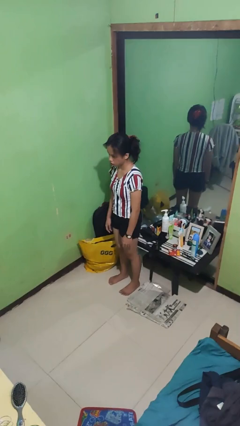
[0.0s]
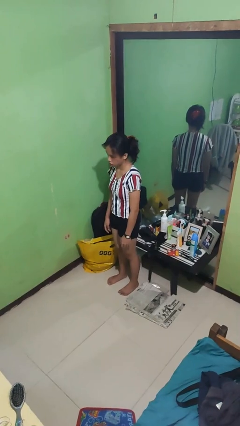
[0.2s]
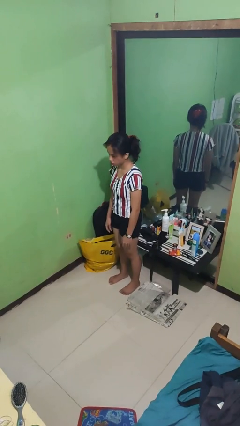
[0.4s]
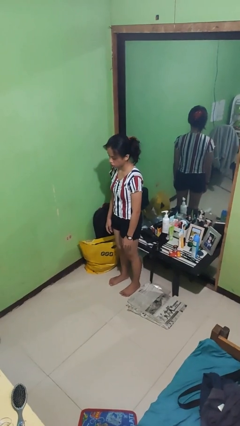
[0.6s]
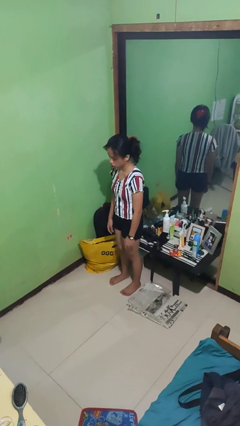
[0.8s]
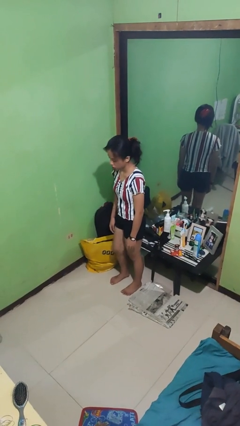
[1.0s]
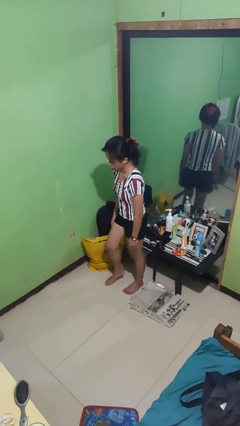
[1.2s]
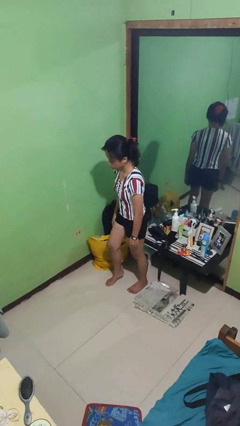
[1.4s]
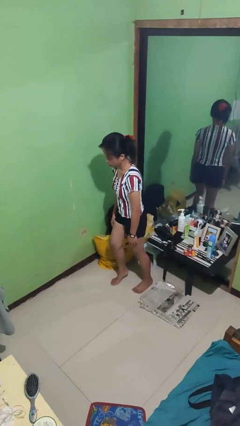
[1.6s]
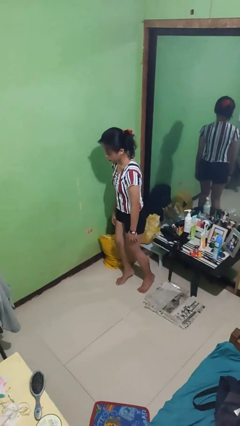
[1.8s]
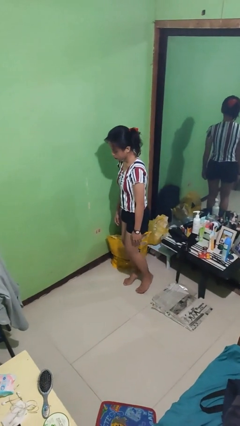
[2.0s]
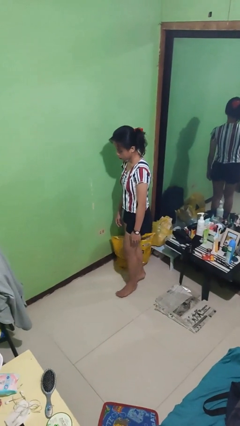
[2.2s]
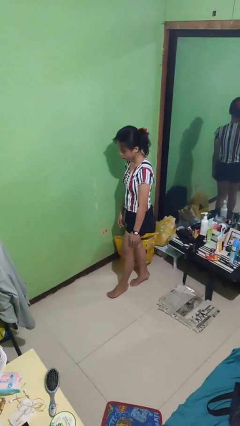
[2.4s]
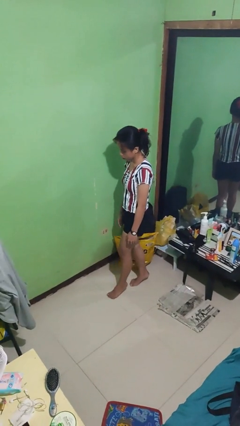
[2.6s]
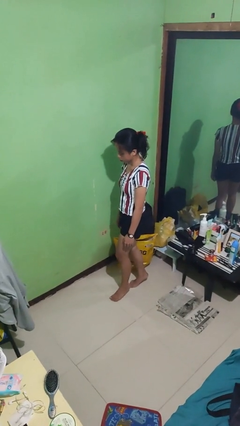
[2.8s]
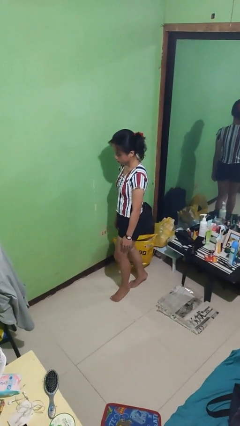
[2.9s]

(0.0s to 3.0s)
person walks tiptoe

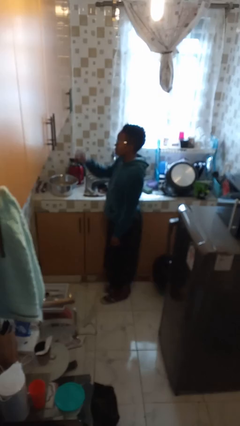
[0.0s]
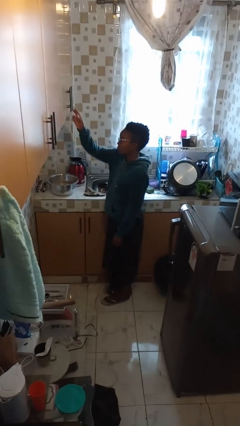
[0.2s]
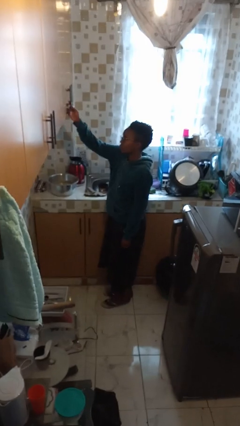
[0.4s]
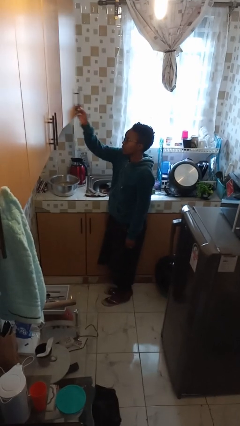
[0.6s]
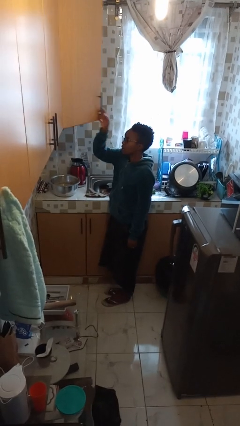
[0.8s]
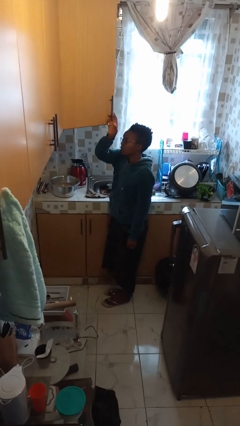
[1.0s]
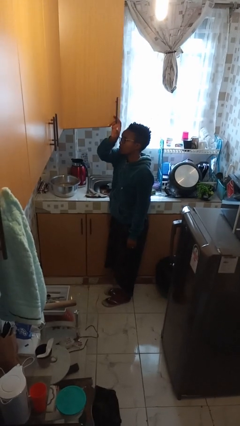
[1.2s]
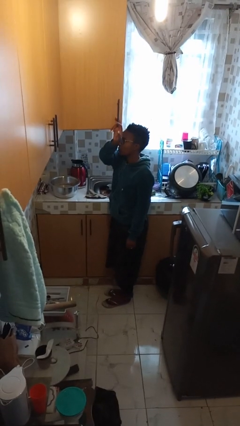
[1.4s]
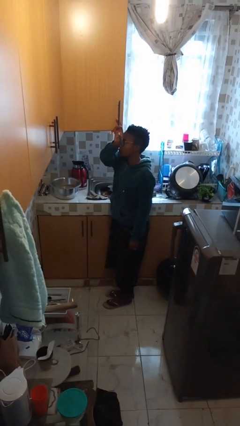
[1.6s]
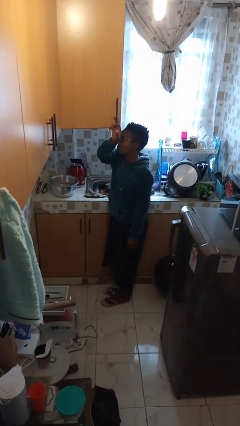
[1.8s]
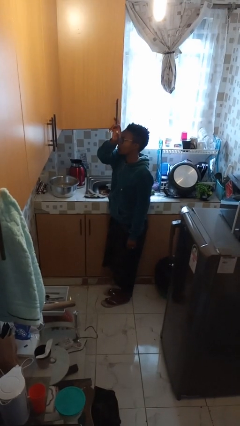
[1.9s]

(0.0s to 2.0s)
person opens cabinet

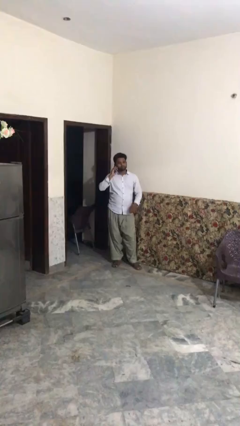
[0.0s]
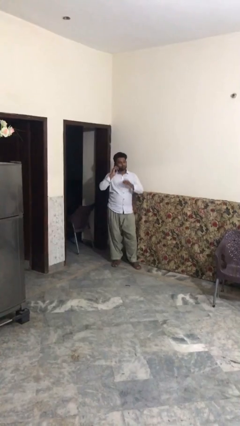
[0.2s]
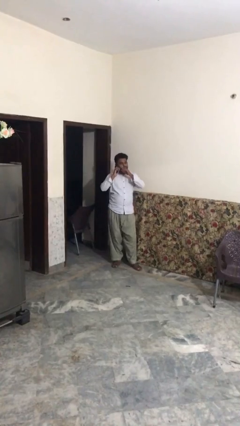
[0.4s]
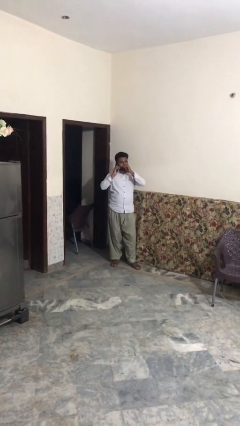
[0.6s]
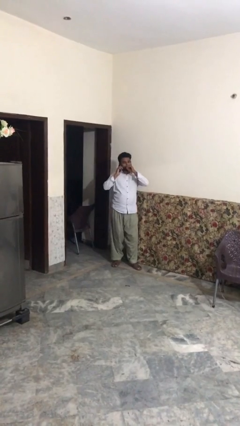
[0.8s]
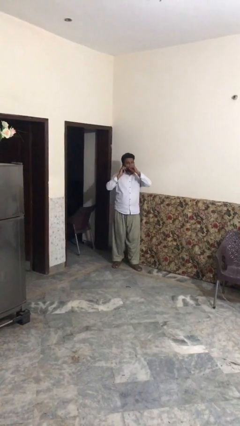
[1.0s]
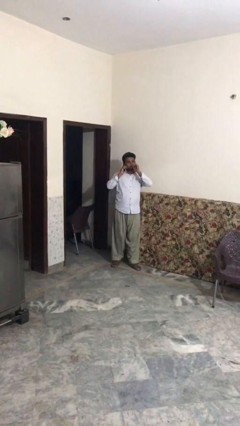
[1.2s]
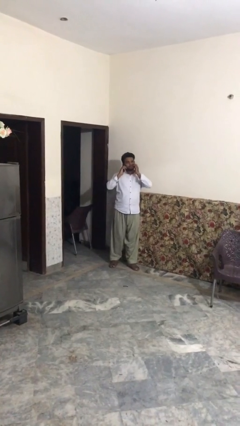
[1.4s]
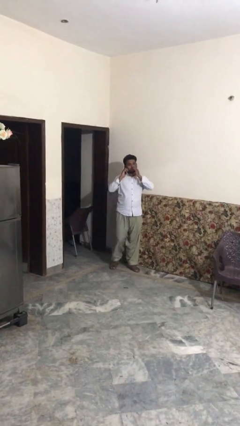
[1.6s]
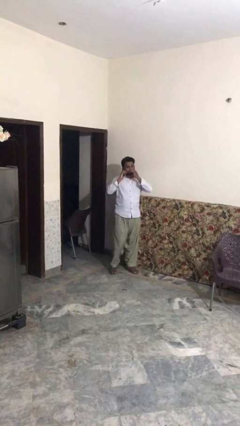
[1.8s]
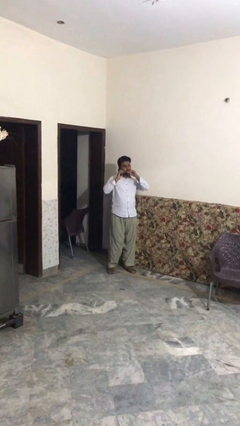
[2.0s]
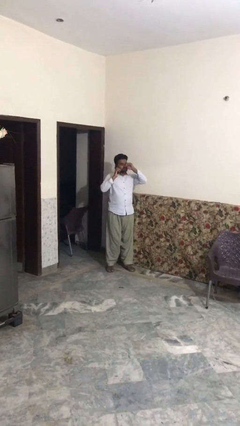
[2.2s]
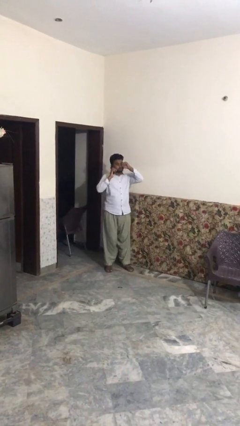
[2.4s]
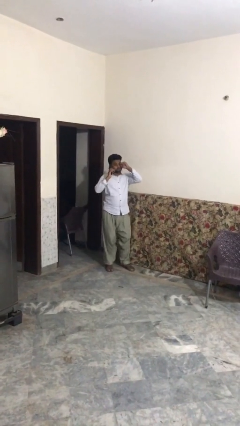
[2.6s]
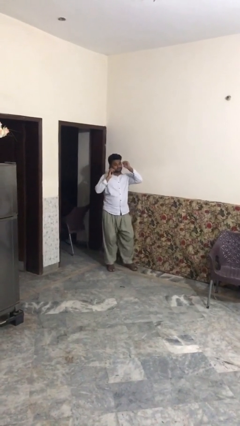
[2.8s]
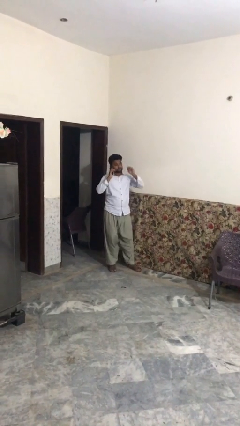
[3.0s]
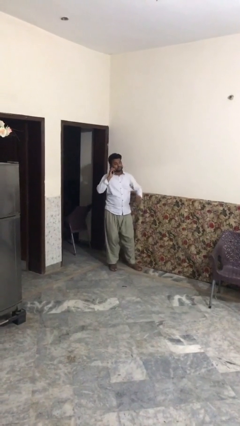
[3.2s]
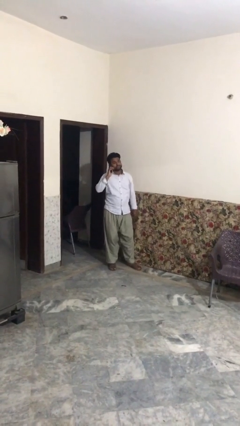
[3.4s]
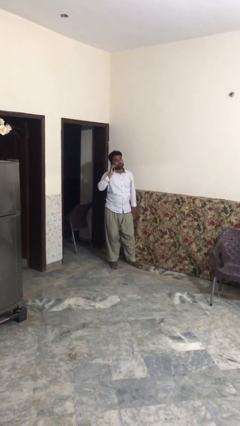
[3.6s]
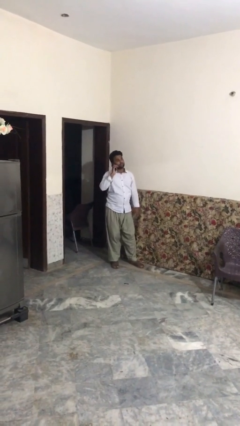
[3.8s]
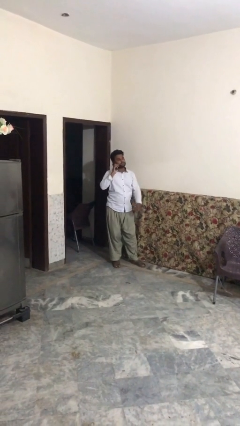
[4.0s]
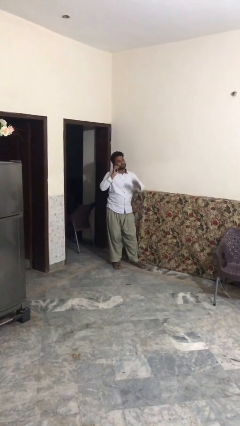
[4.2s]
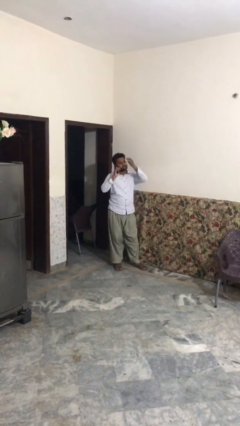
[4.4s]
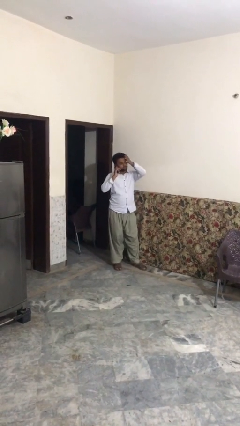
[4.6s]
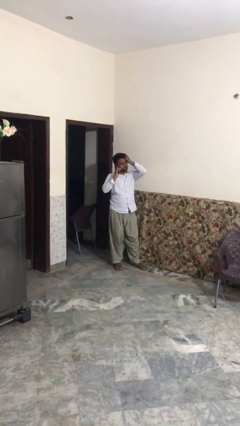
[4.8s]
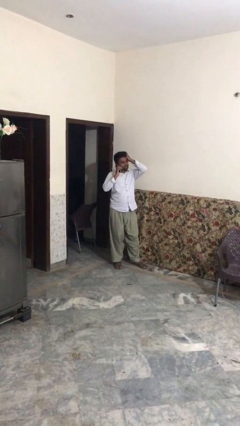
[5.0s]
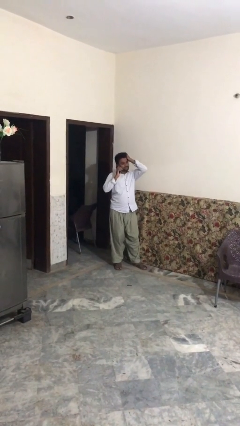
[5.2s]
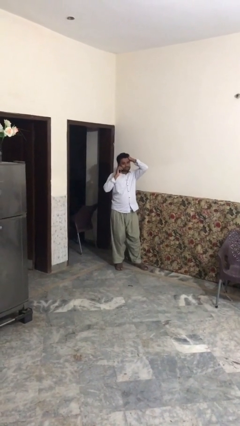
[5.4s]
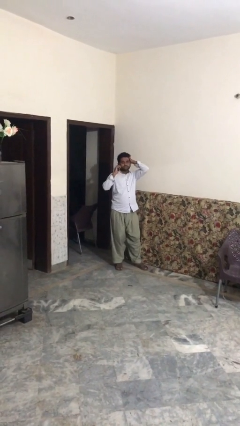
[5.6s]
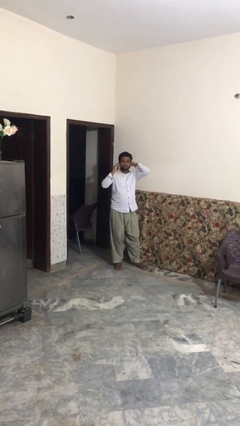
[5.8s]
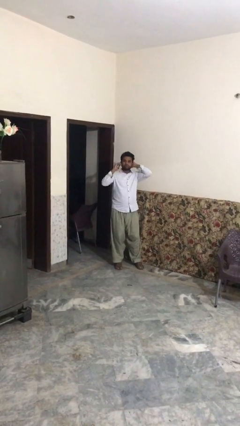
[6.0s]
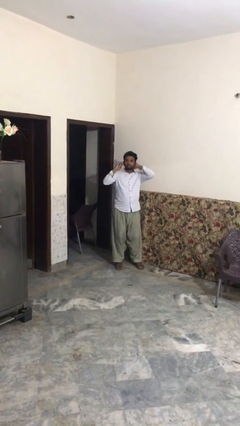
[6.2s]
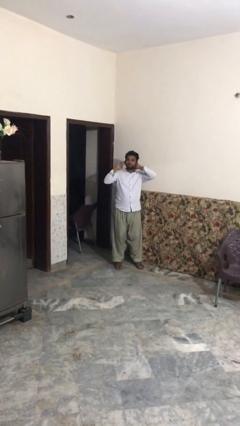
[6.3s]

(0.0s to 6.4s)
person talks on phone

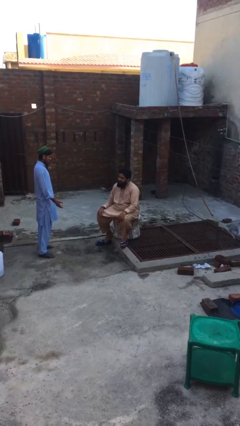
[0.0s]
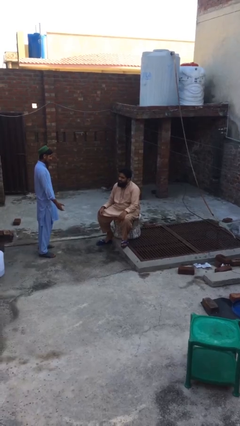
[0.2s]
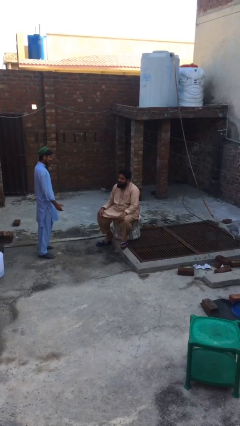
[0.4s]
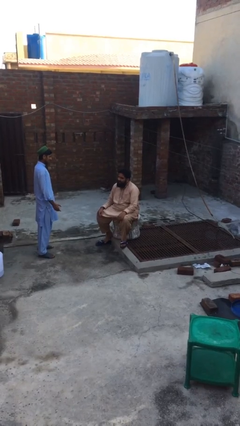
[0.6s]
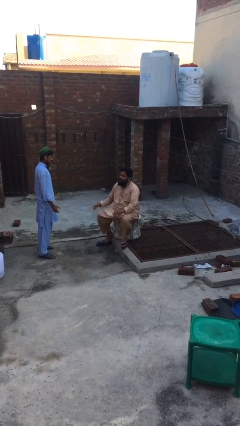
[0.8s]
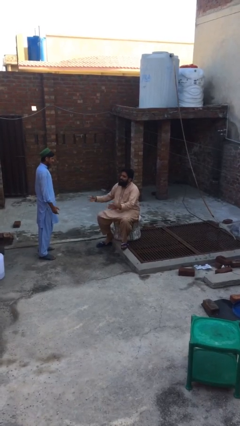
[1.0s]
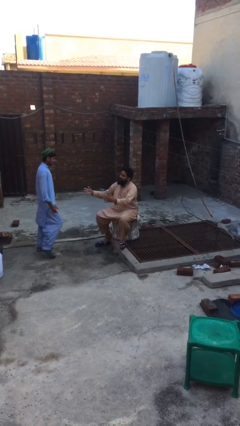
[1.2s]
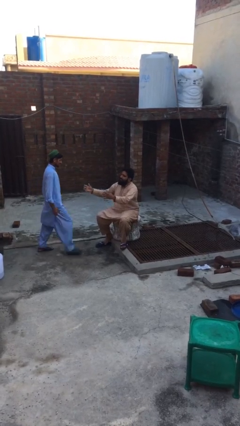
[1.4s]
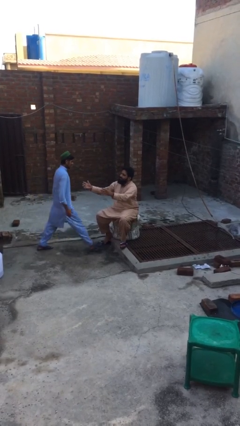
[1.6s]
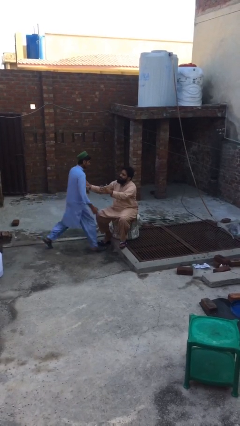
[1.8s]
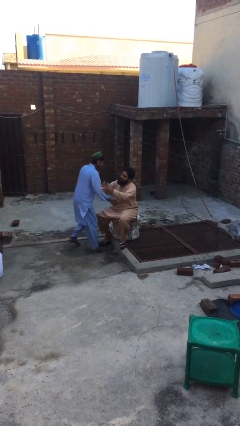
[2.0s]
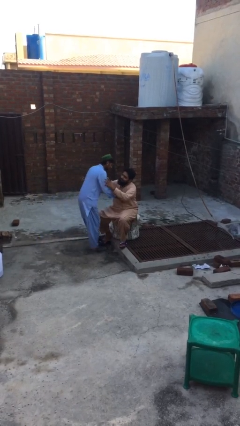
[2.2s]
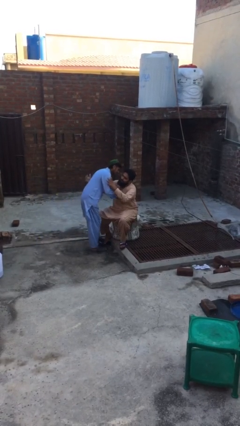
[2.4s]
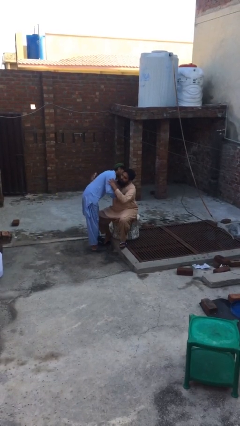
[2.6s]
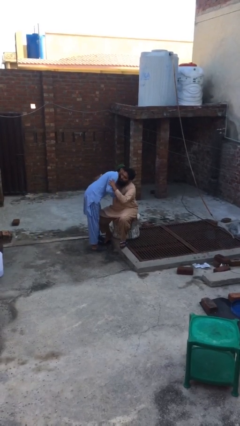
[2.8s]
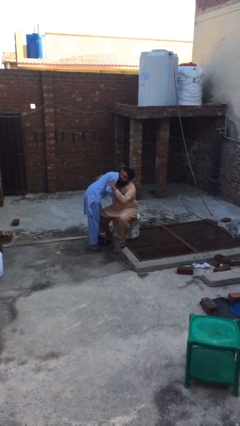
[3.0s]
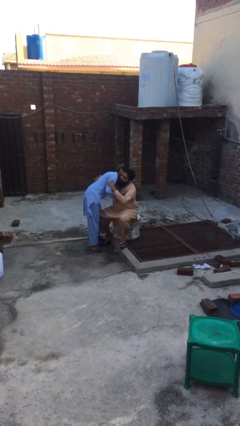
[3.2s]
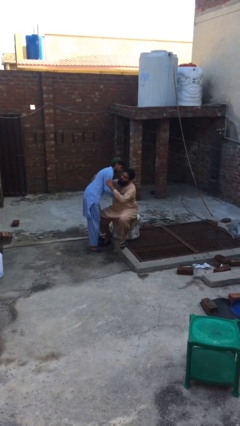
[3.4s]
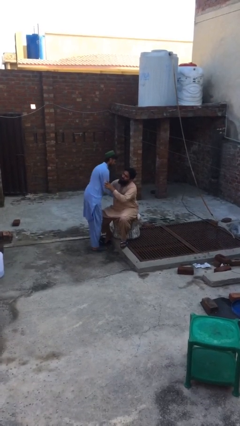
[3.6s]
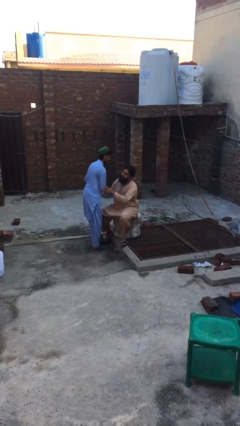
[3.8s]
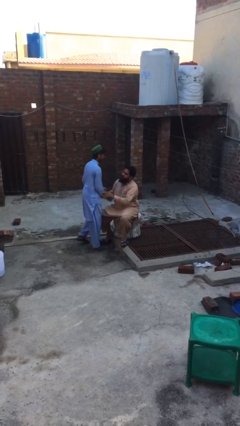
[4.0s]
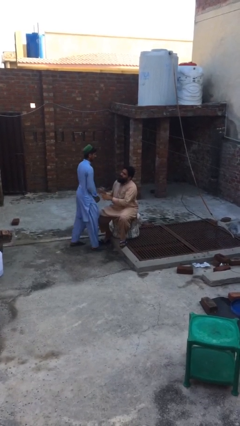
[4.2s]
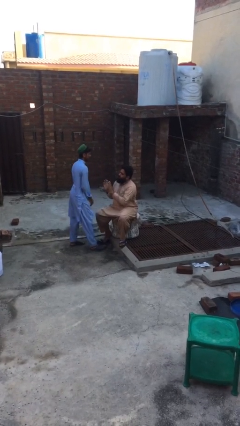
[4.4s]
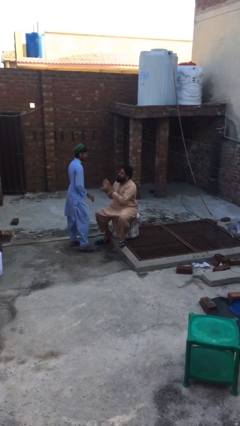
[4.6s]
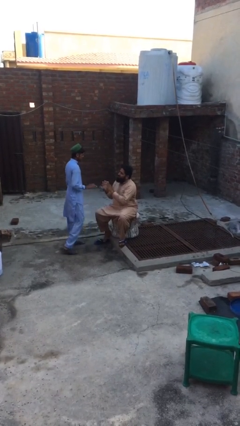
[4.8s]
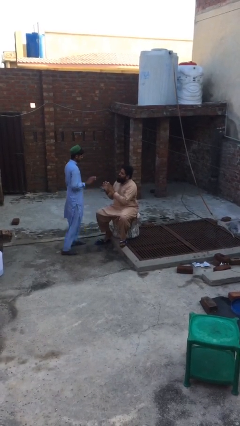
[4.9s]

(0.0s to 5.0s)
person embraces person

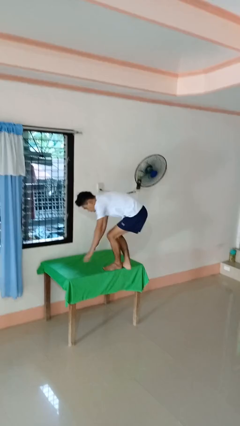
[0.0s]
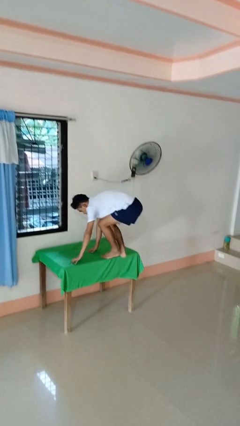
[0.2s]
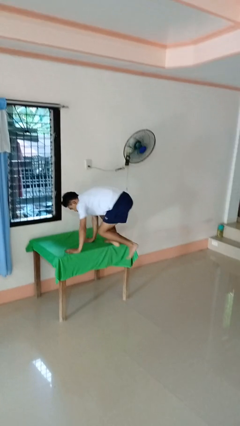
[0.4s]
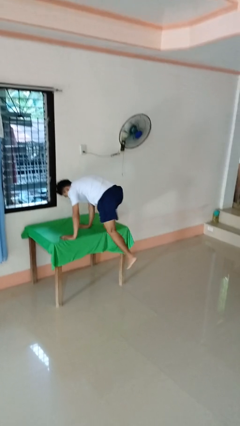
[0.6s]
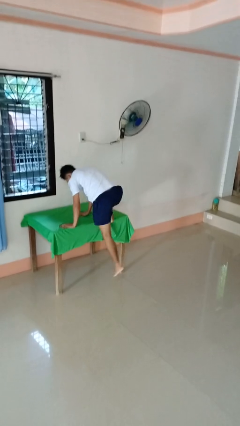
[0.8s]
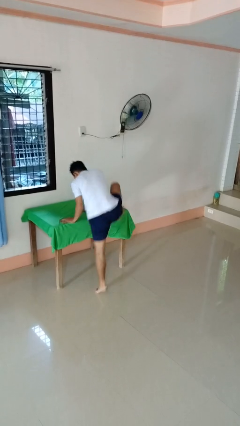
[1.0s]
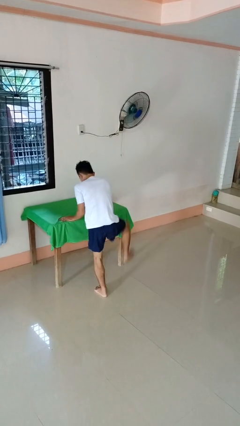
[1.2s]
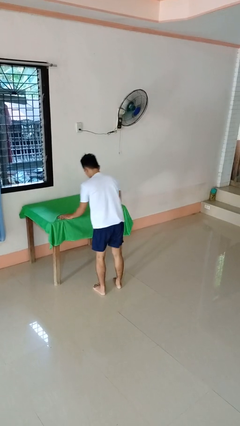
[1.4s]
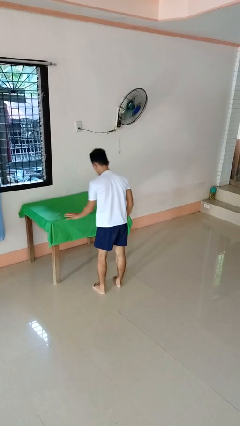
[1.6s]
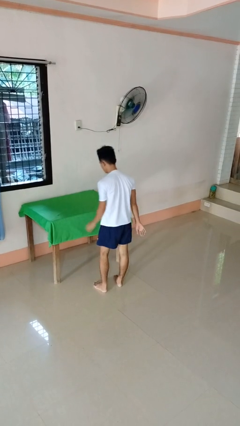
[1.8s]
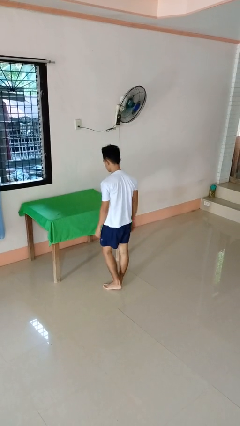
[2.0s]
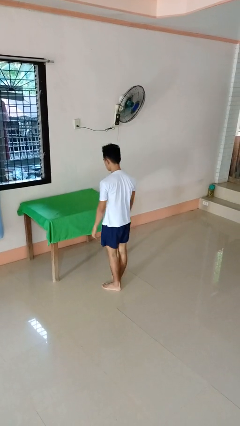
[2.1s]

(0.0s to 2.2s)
person climbs off table
